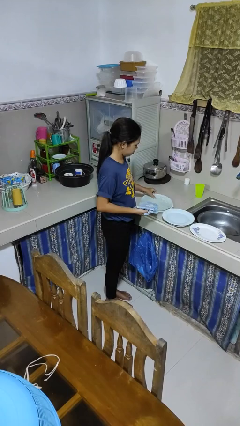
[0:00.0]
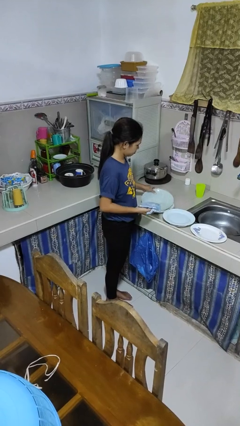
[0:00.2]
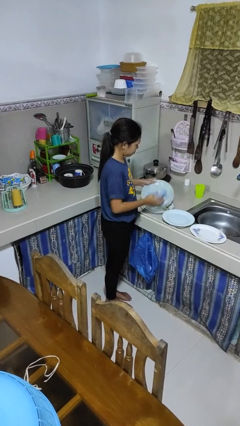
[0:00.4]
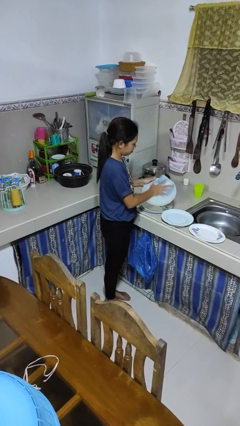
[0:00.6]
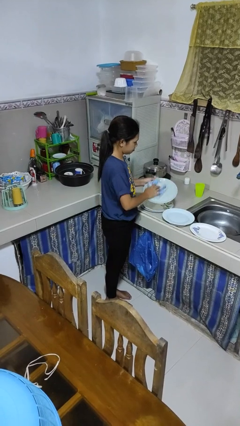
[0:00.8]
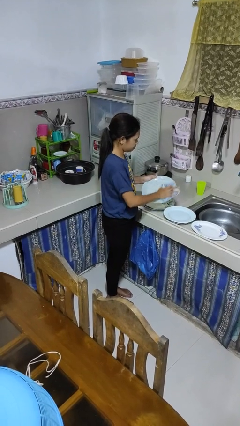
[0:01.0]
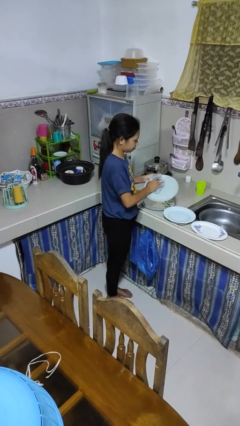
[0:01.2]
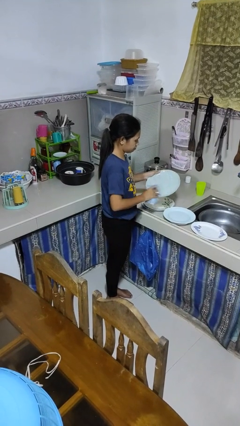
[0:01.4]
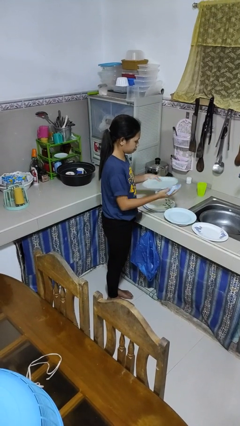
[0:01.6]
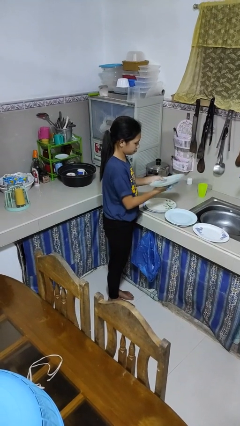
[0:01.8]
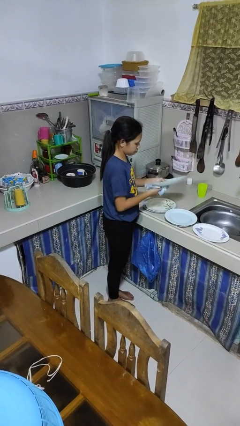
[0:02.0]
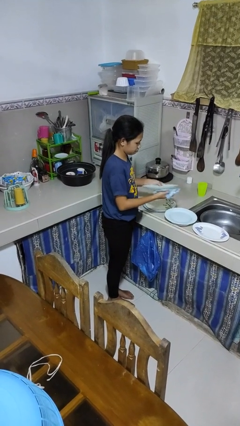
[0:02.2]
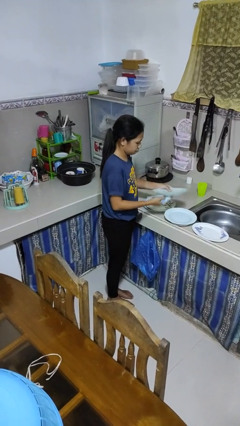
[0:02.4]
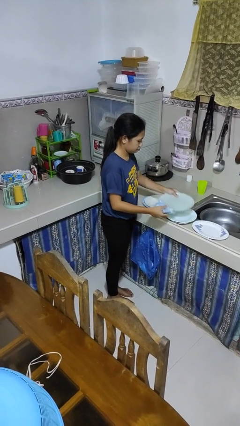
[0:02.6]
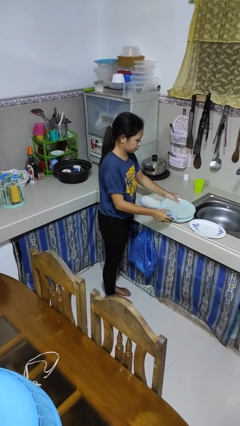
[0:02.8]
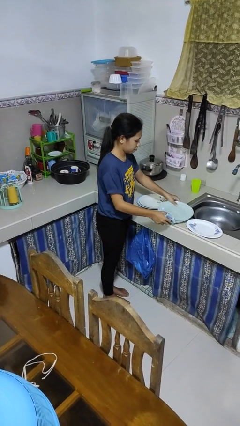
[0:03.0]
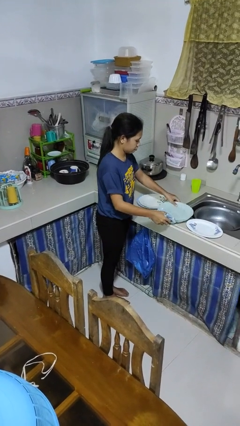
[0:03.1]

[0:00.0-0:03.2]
person dries dish

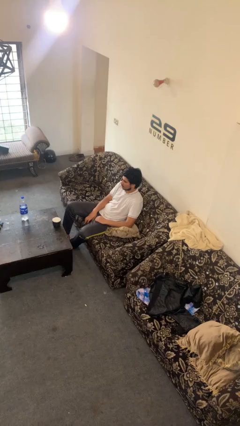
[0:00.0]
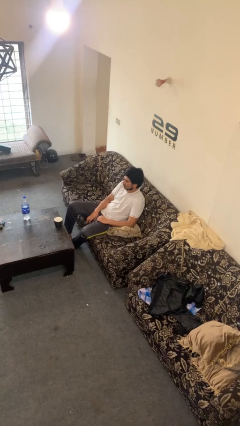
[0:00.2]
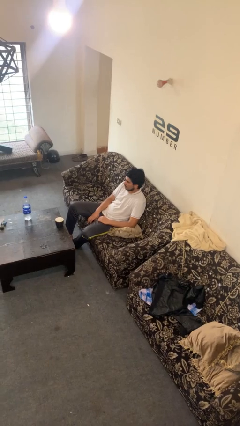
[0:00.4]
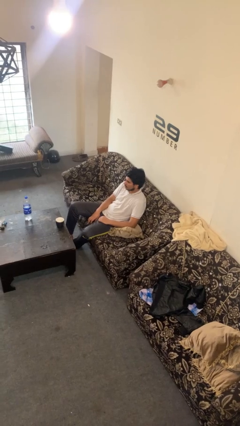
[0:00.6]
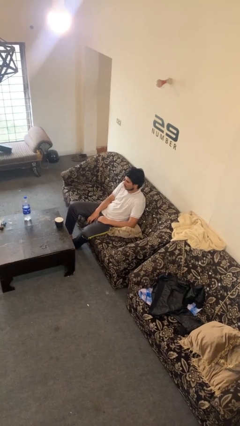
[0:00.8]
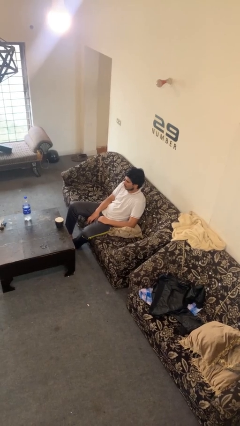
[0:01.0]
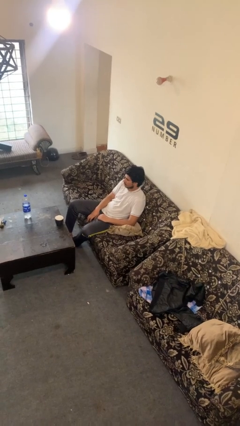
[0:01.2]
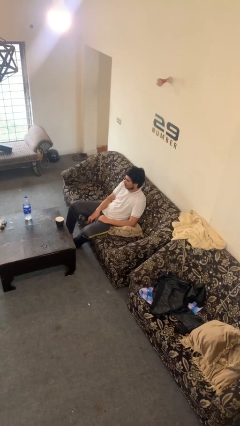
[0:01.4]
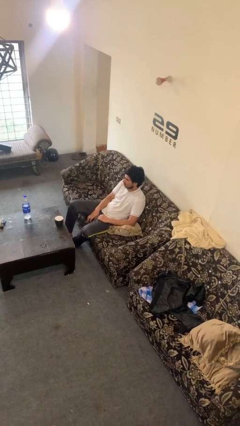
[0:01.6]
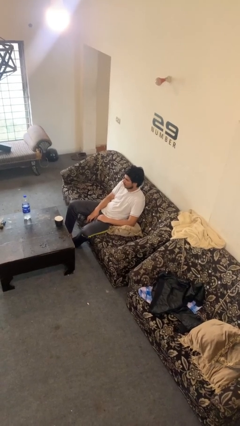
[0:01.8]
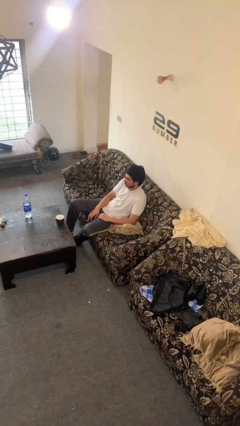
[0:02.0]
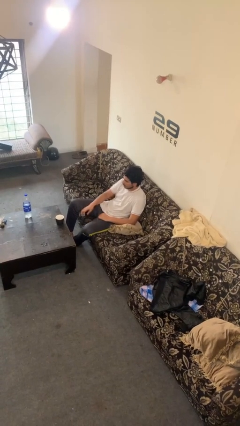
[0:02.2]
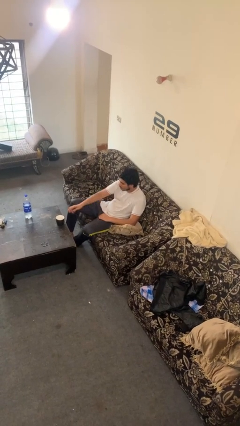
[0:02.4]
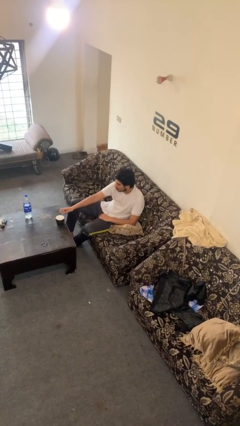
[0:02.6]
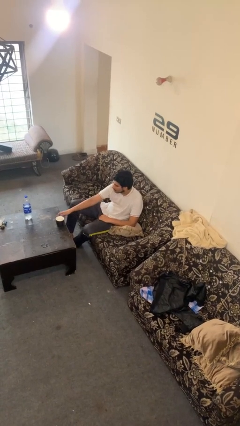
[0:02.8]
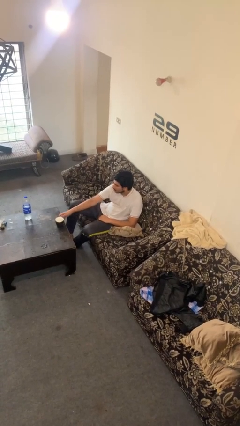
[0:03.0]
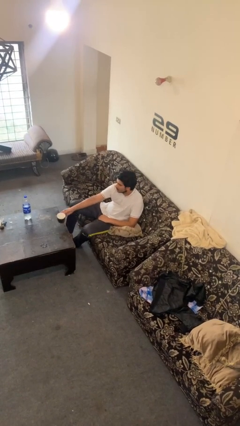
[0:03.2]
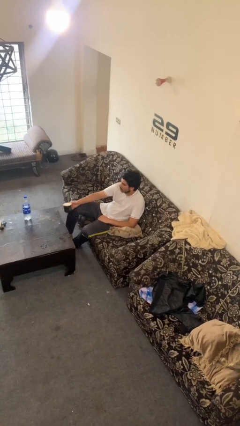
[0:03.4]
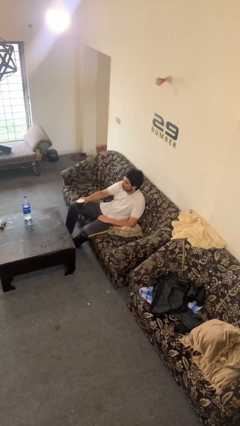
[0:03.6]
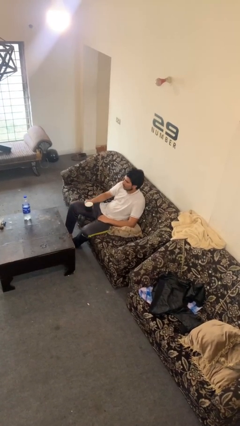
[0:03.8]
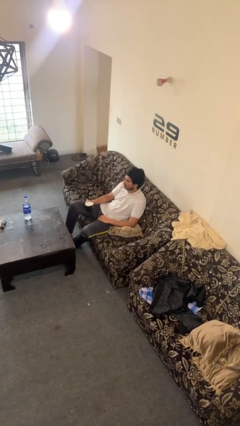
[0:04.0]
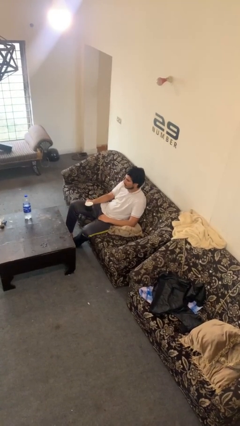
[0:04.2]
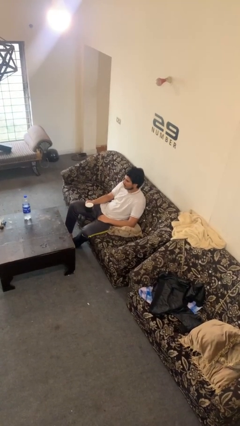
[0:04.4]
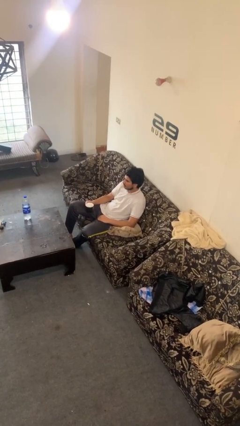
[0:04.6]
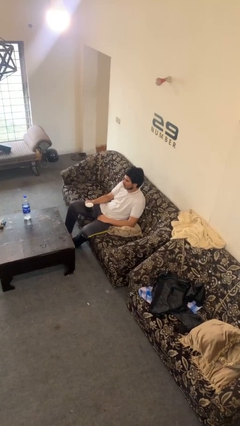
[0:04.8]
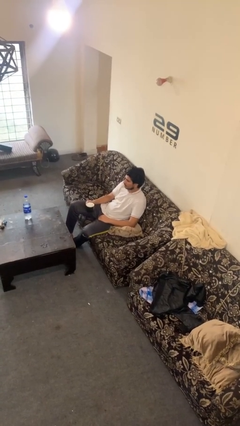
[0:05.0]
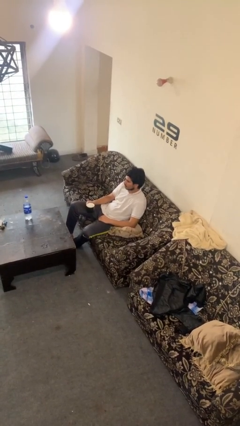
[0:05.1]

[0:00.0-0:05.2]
person picks up object from table

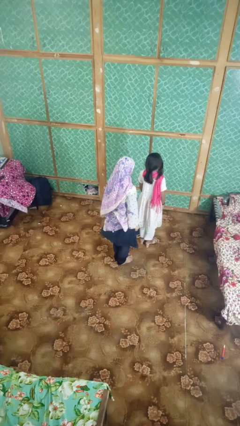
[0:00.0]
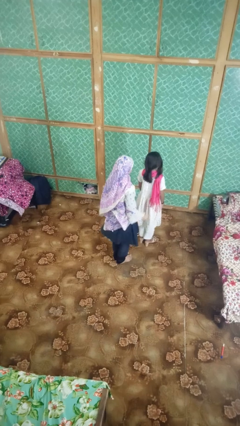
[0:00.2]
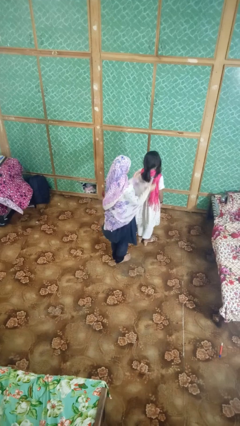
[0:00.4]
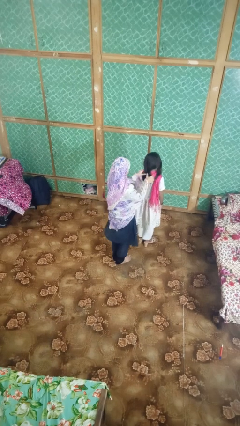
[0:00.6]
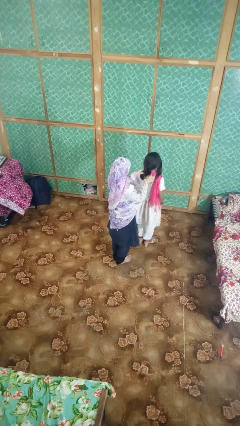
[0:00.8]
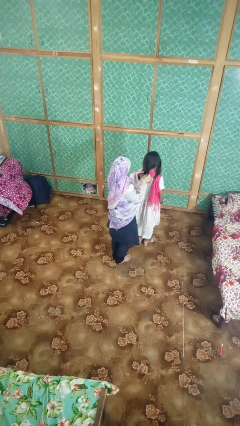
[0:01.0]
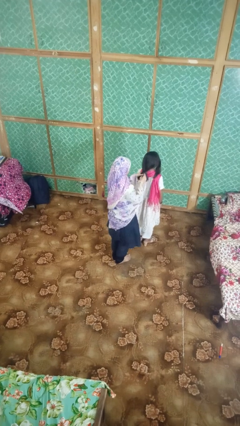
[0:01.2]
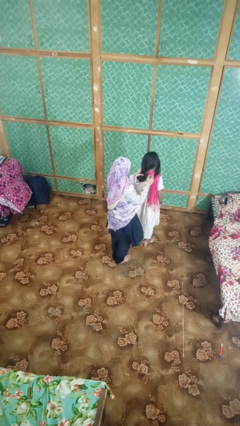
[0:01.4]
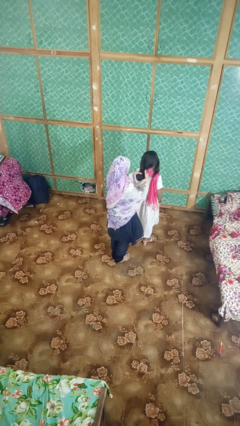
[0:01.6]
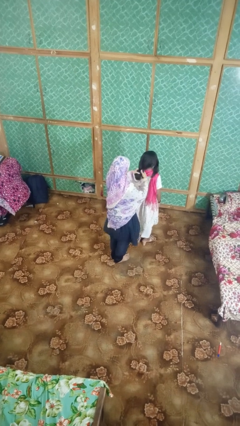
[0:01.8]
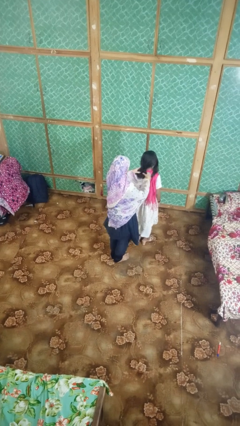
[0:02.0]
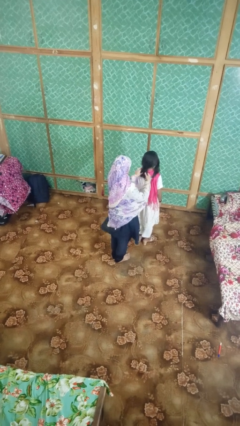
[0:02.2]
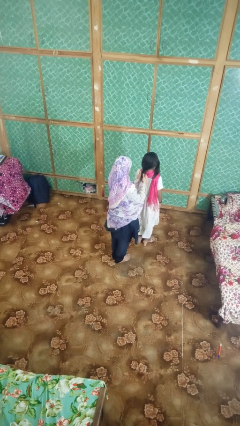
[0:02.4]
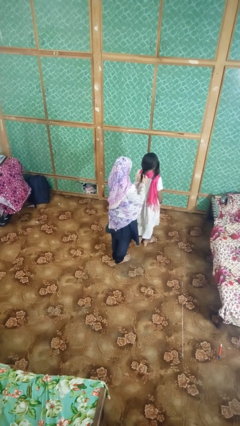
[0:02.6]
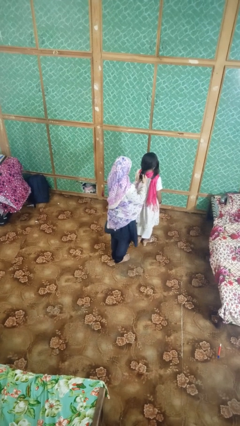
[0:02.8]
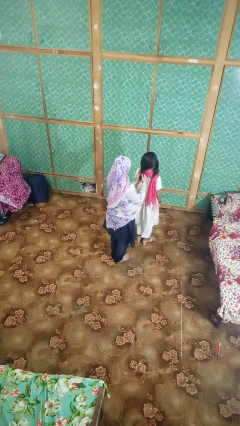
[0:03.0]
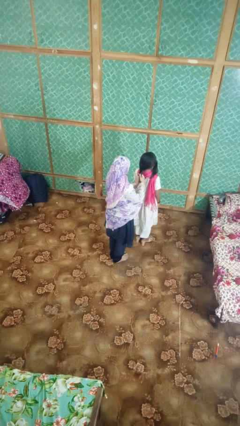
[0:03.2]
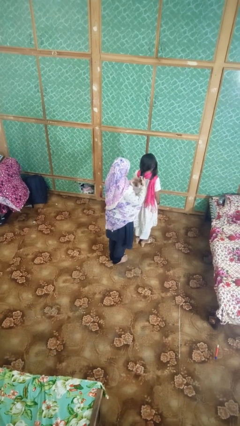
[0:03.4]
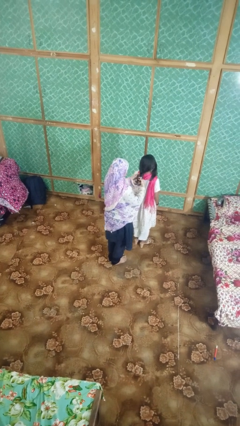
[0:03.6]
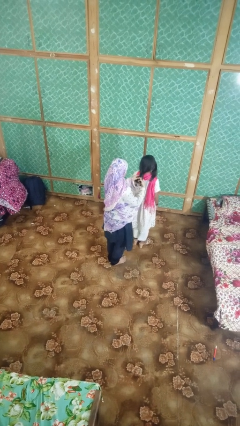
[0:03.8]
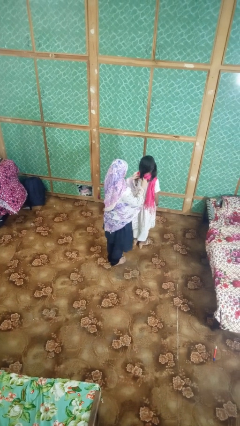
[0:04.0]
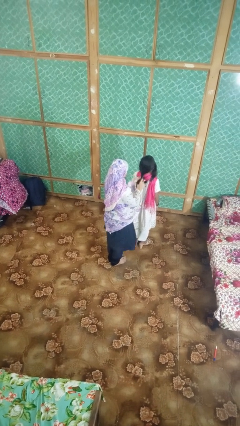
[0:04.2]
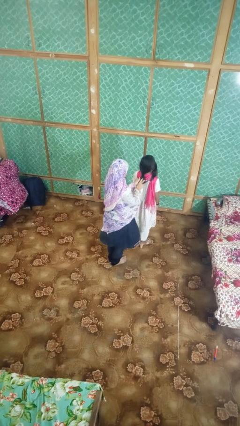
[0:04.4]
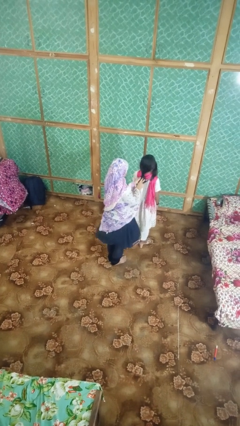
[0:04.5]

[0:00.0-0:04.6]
person braids hair of person

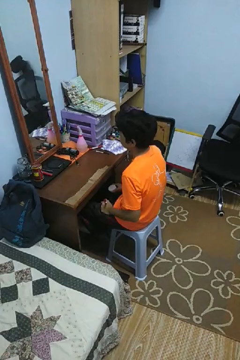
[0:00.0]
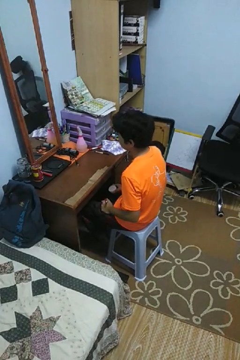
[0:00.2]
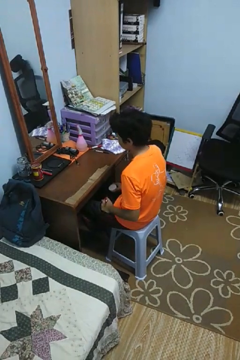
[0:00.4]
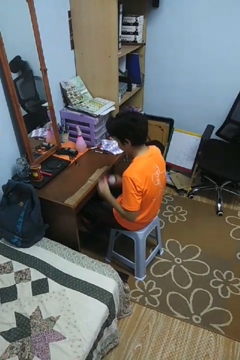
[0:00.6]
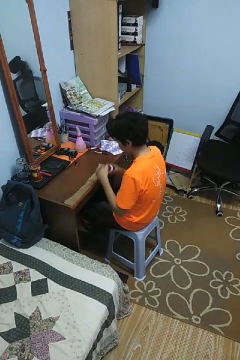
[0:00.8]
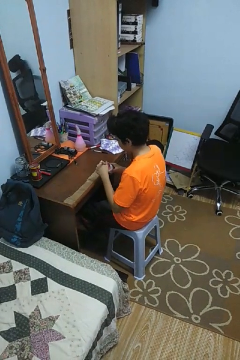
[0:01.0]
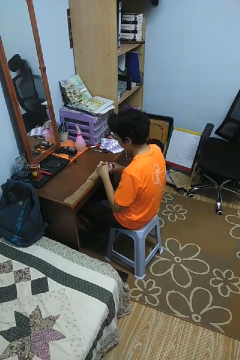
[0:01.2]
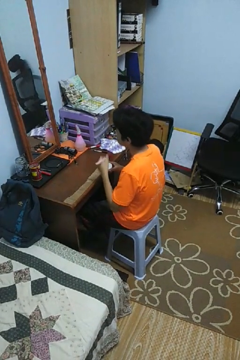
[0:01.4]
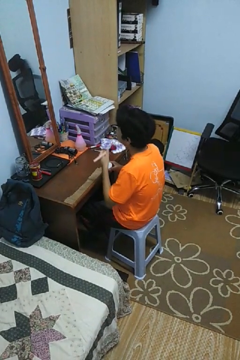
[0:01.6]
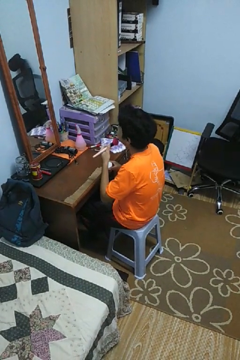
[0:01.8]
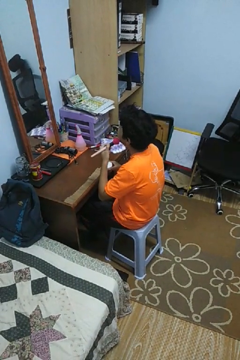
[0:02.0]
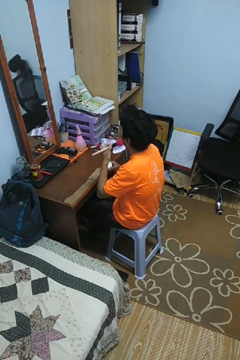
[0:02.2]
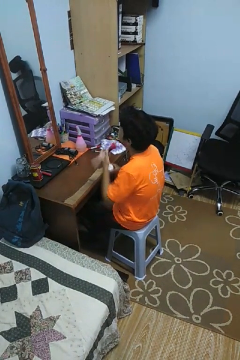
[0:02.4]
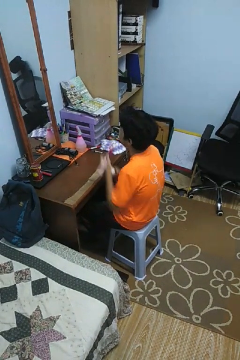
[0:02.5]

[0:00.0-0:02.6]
person applies foundation makeup

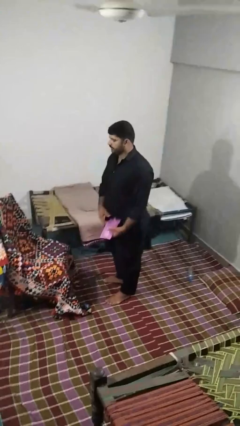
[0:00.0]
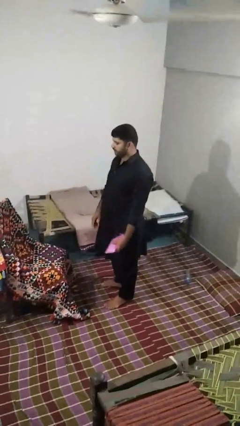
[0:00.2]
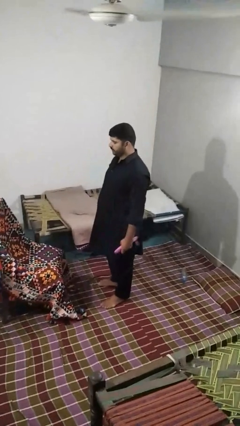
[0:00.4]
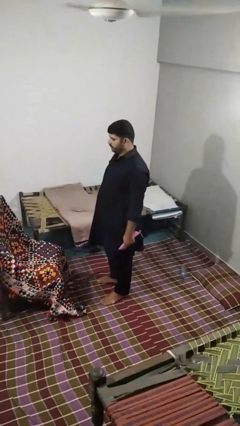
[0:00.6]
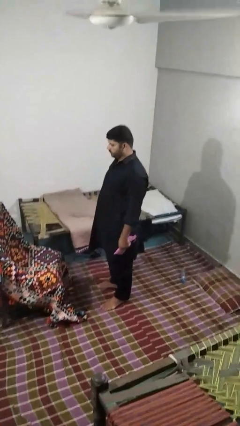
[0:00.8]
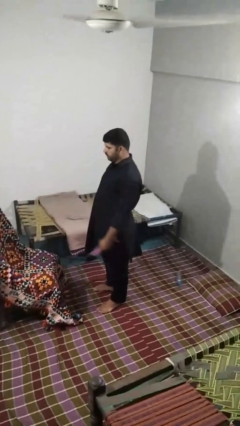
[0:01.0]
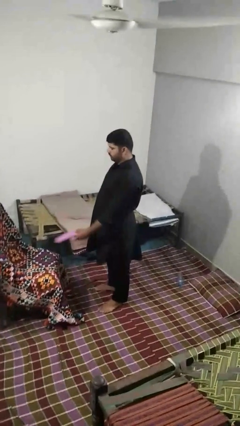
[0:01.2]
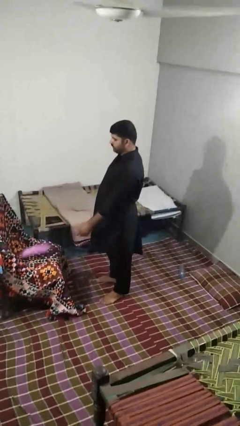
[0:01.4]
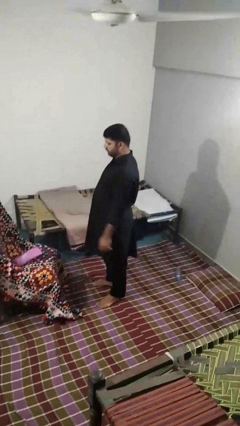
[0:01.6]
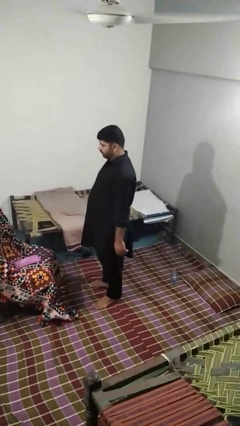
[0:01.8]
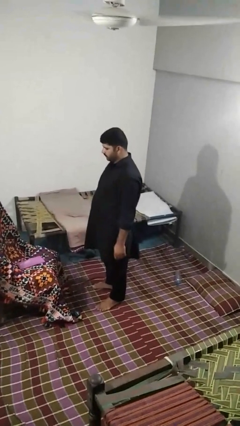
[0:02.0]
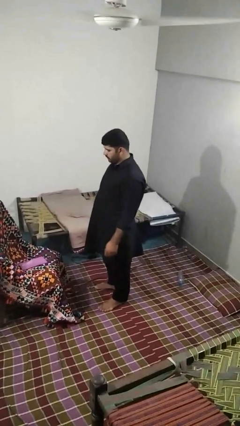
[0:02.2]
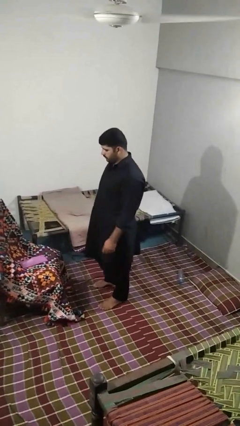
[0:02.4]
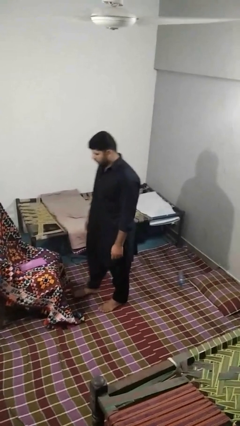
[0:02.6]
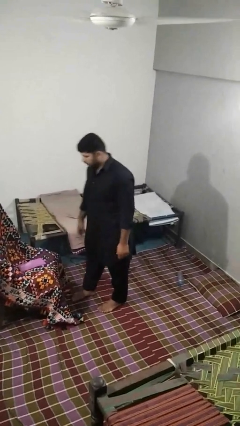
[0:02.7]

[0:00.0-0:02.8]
person puts down object on couch
